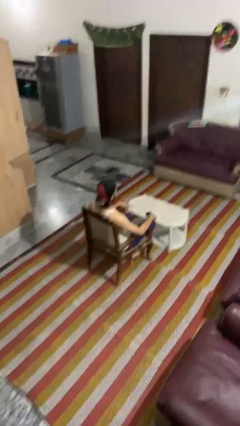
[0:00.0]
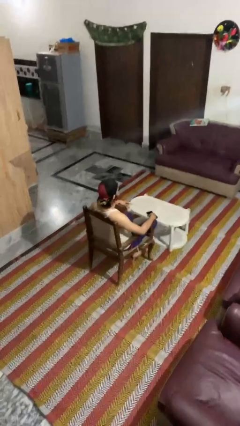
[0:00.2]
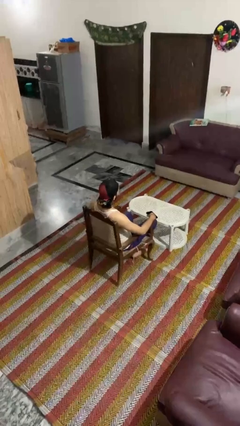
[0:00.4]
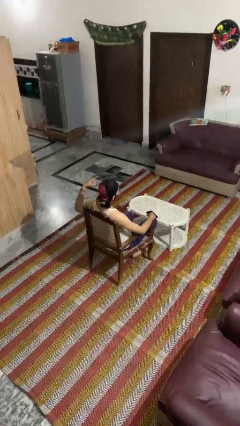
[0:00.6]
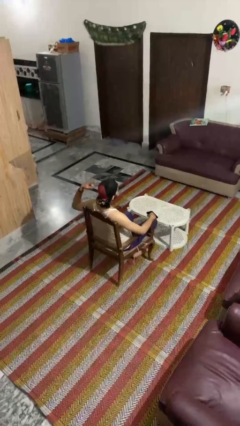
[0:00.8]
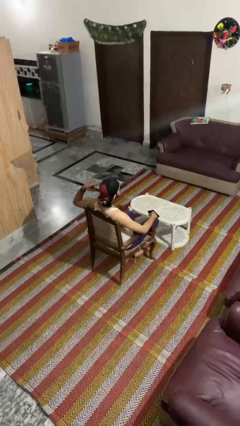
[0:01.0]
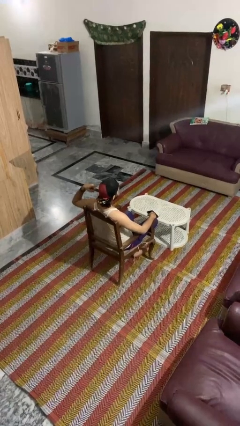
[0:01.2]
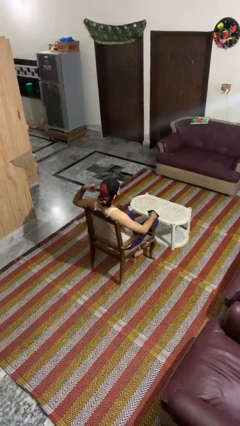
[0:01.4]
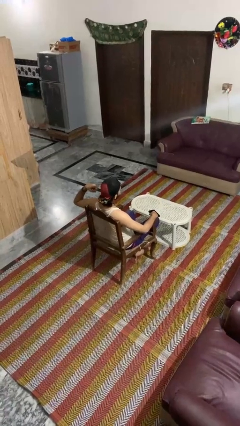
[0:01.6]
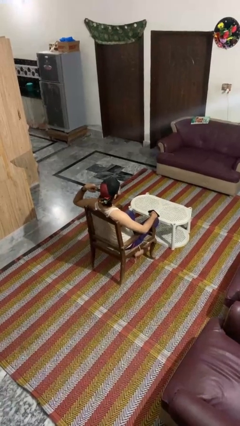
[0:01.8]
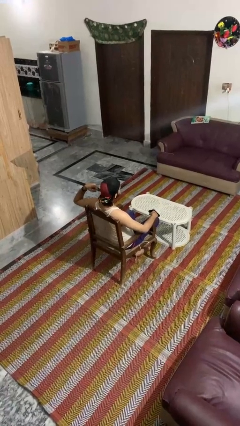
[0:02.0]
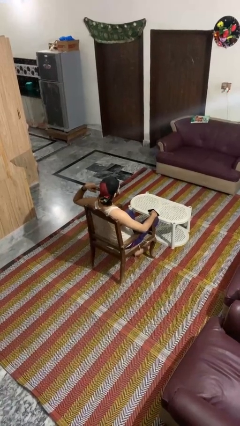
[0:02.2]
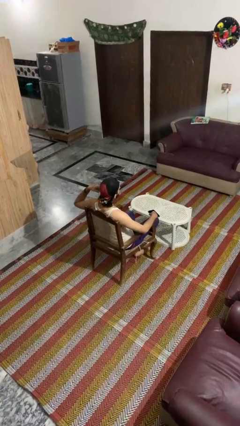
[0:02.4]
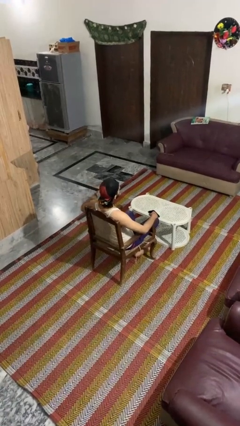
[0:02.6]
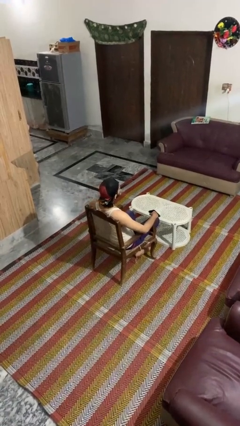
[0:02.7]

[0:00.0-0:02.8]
person gestures listen closely

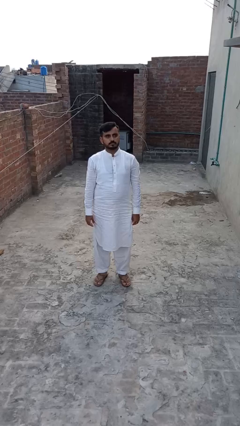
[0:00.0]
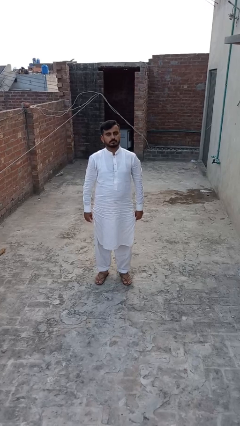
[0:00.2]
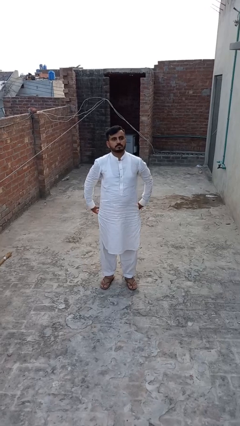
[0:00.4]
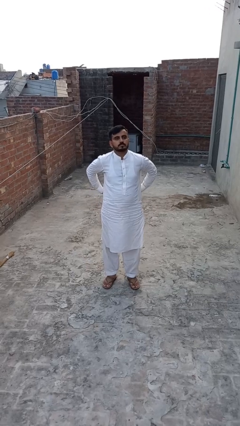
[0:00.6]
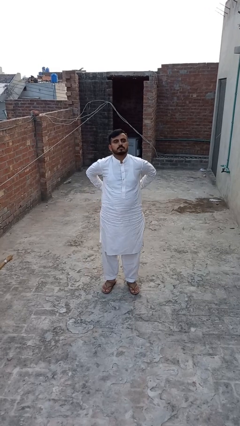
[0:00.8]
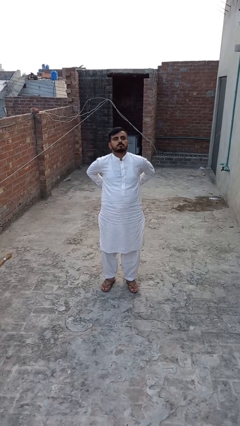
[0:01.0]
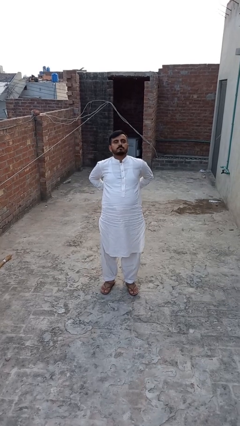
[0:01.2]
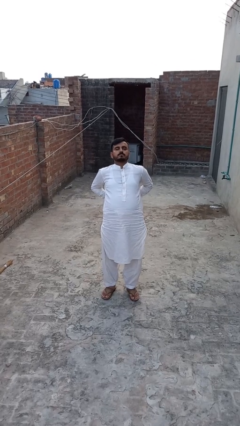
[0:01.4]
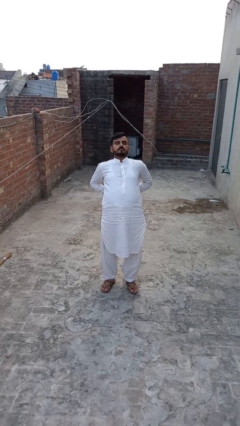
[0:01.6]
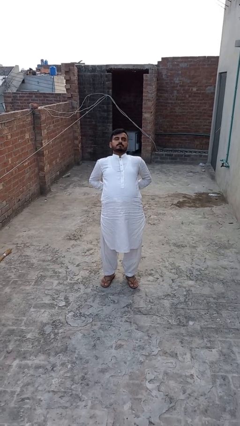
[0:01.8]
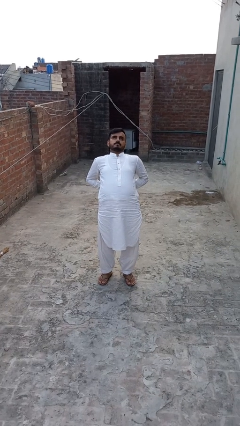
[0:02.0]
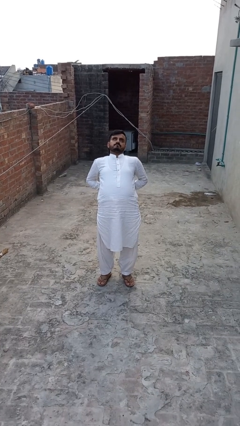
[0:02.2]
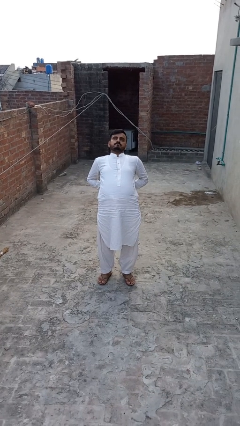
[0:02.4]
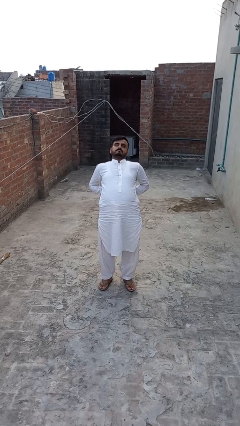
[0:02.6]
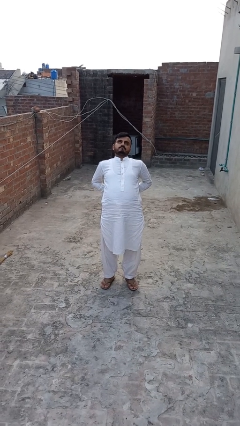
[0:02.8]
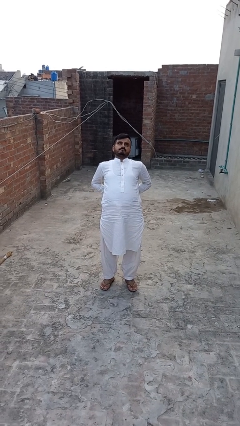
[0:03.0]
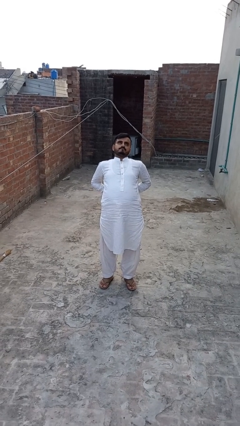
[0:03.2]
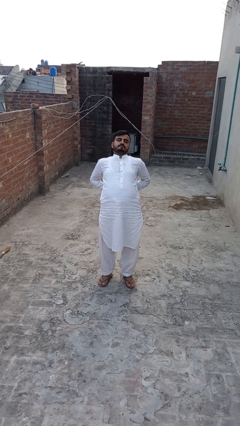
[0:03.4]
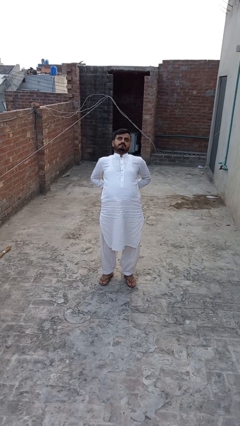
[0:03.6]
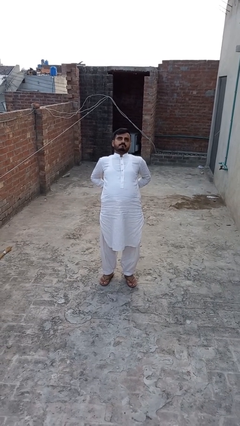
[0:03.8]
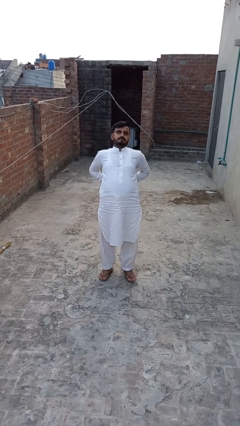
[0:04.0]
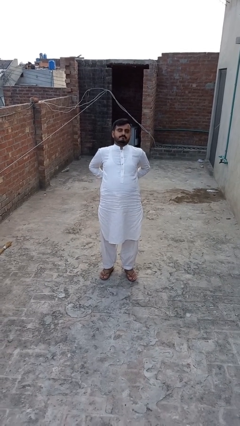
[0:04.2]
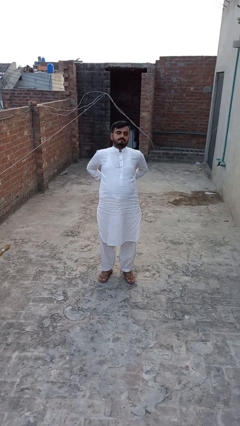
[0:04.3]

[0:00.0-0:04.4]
person stretches back

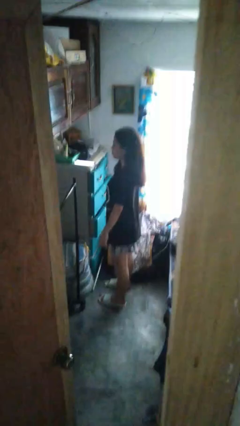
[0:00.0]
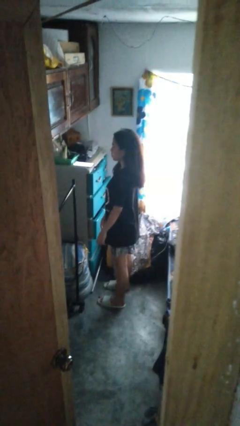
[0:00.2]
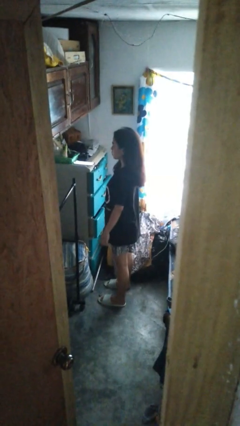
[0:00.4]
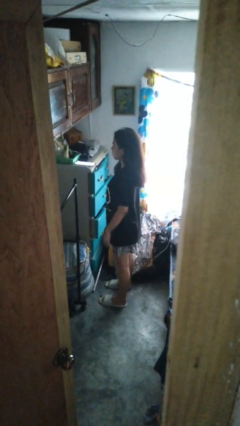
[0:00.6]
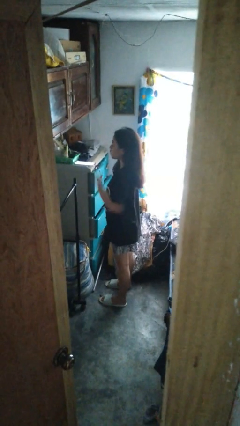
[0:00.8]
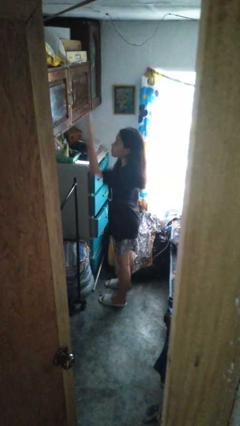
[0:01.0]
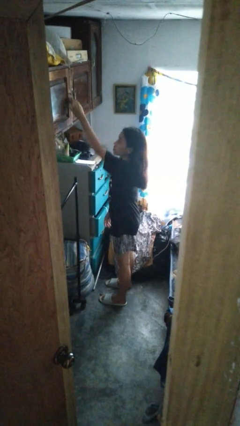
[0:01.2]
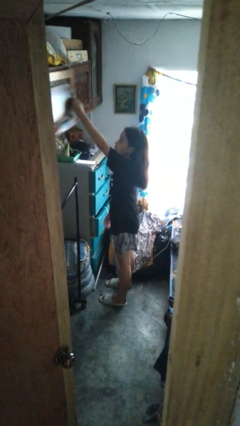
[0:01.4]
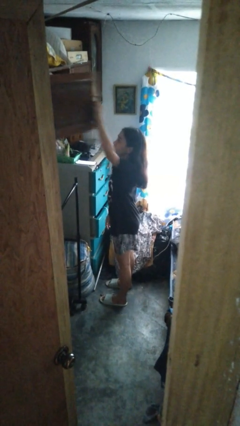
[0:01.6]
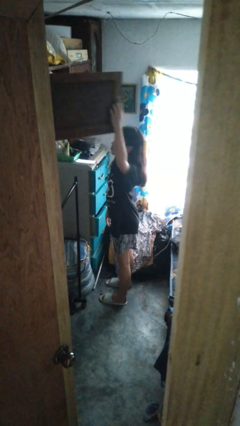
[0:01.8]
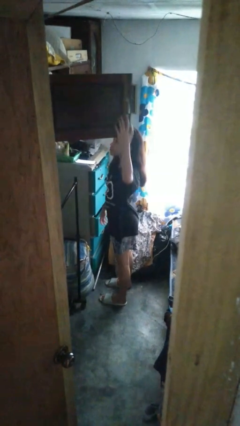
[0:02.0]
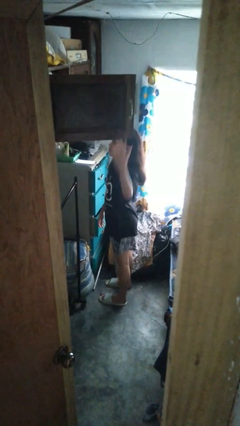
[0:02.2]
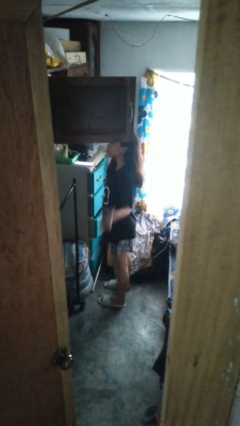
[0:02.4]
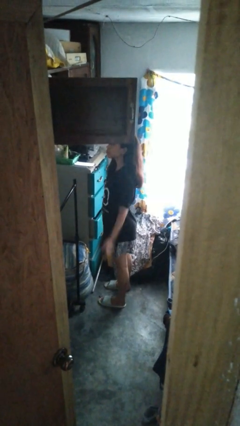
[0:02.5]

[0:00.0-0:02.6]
person opens closet door

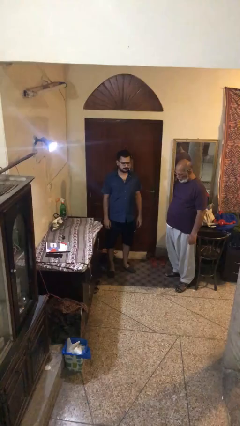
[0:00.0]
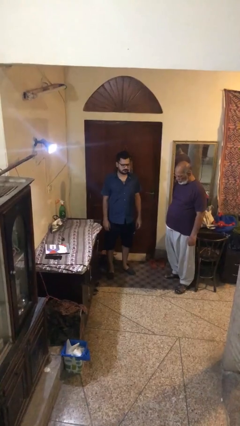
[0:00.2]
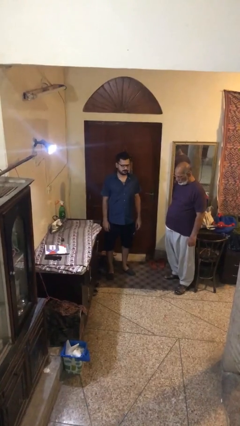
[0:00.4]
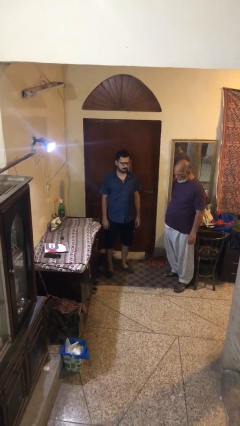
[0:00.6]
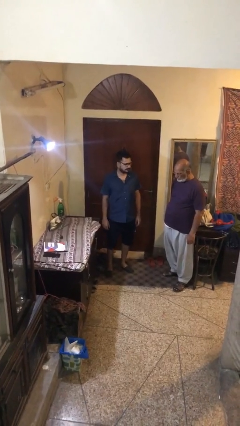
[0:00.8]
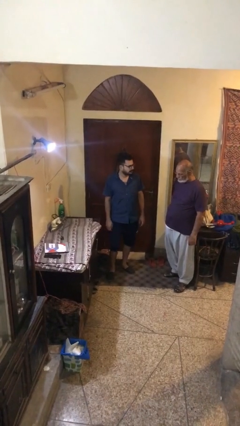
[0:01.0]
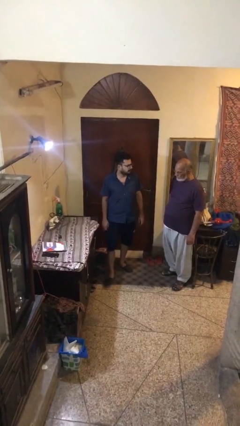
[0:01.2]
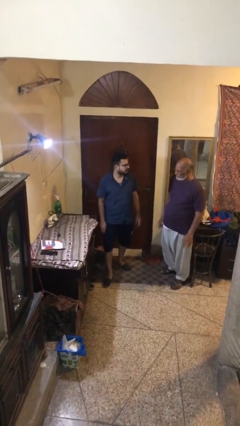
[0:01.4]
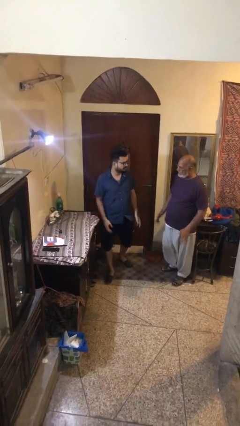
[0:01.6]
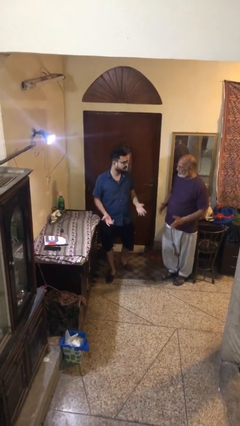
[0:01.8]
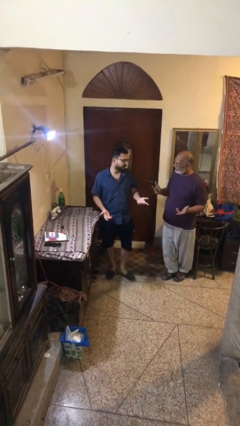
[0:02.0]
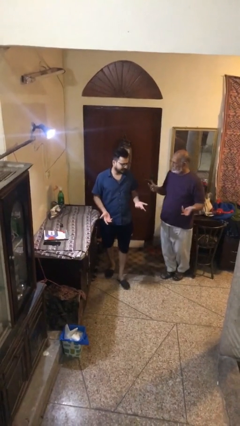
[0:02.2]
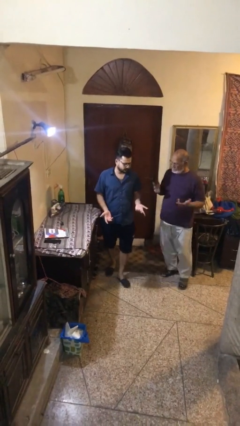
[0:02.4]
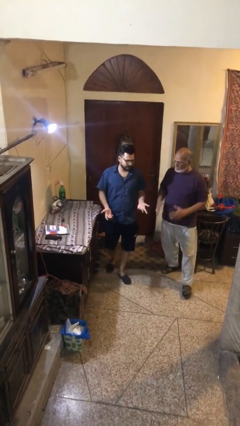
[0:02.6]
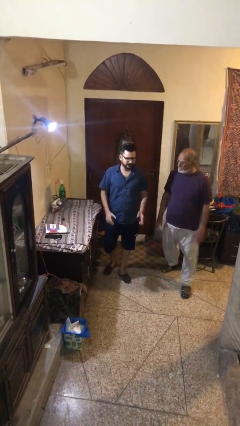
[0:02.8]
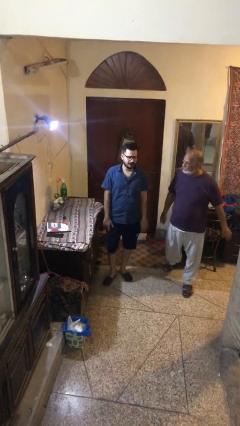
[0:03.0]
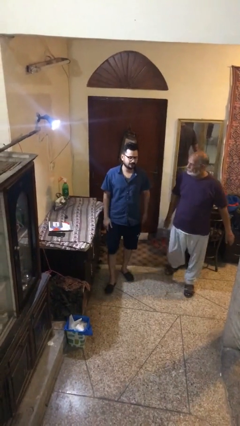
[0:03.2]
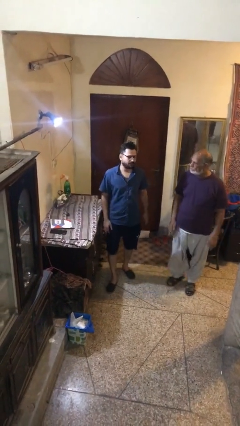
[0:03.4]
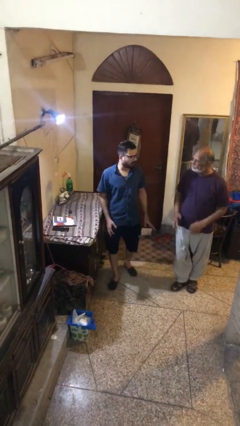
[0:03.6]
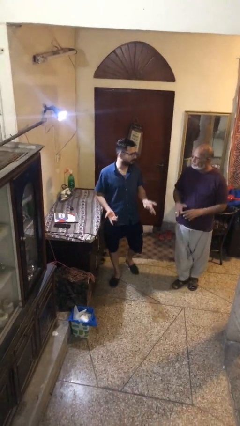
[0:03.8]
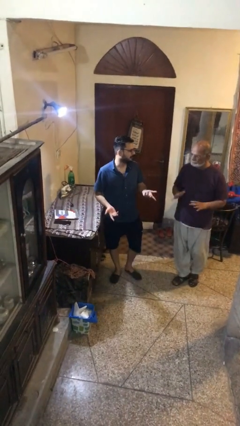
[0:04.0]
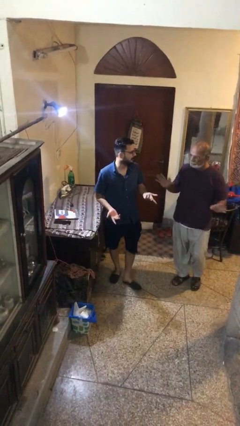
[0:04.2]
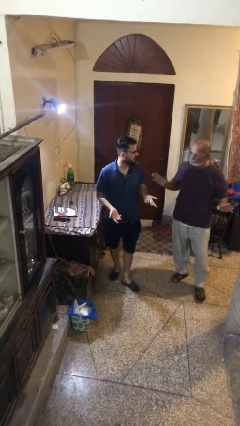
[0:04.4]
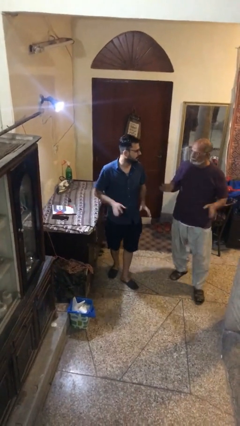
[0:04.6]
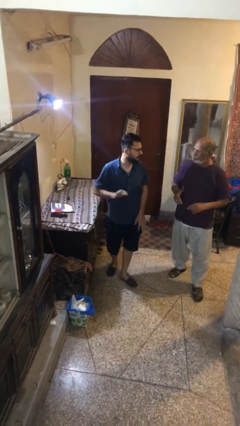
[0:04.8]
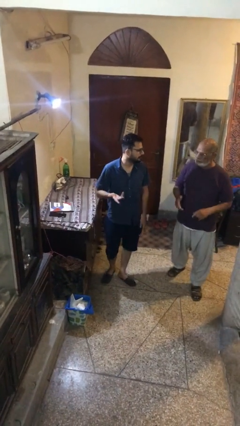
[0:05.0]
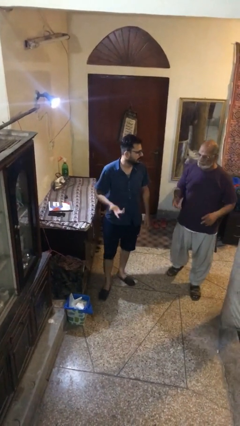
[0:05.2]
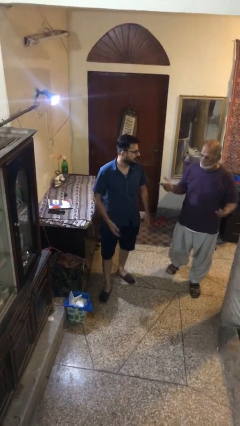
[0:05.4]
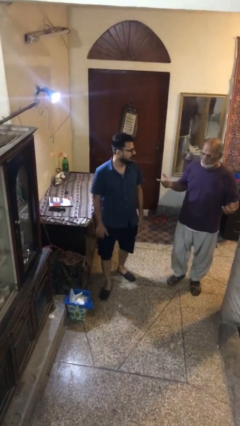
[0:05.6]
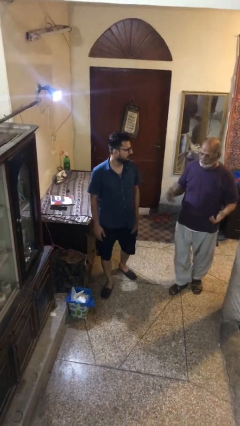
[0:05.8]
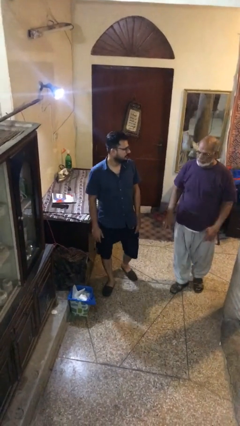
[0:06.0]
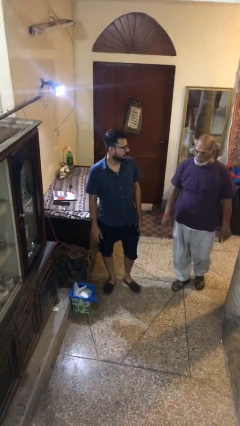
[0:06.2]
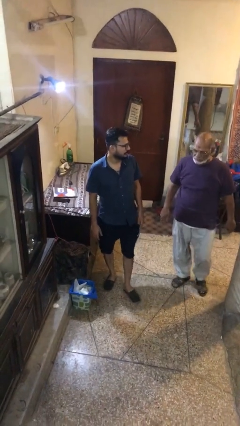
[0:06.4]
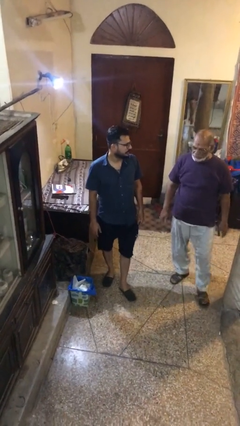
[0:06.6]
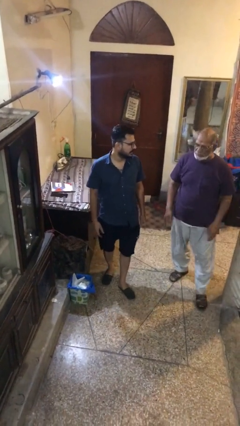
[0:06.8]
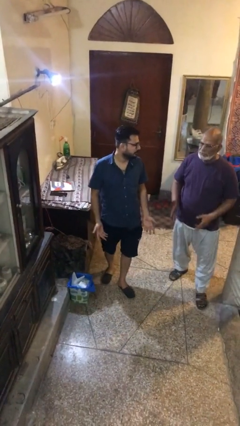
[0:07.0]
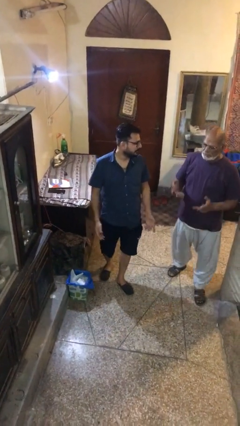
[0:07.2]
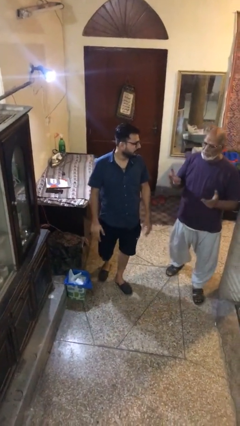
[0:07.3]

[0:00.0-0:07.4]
person talks to person

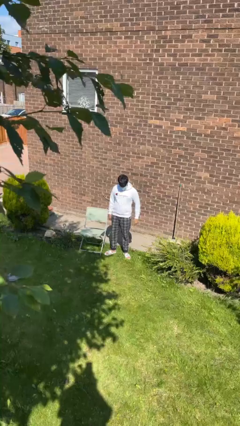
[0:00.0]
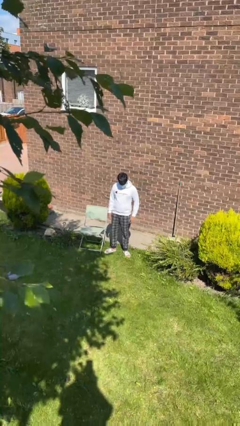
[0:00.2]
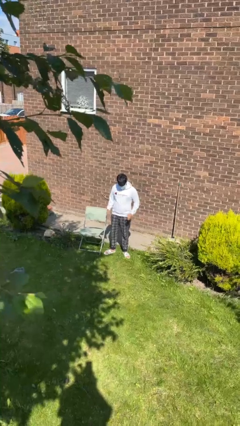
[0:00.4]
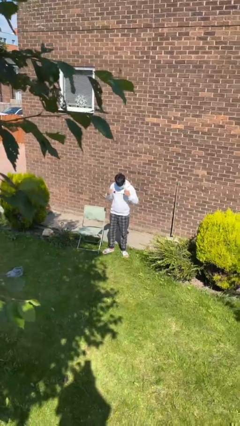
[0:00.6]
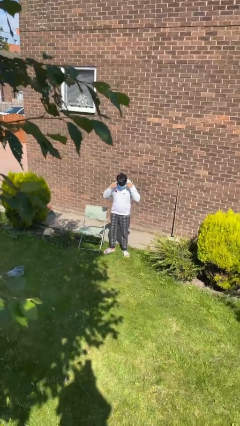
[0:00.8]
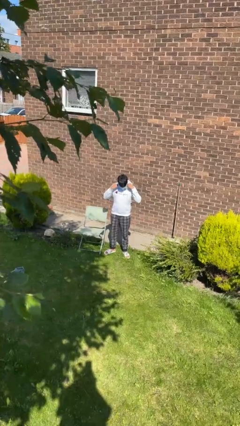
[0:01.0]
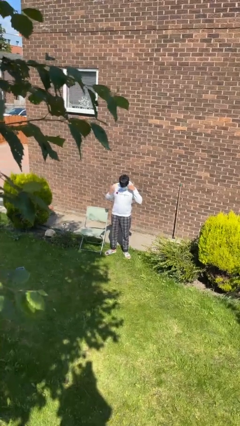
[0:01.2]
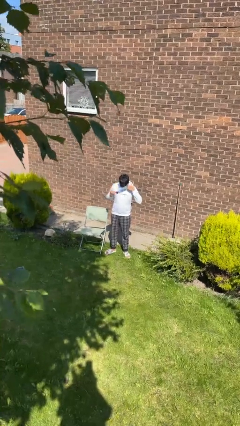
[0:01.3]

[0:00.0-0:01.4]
person takes off facemask
